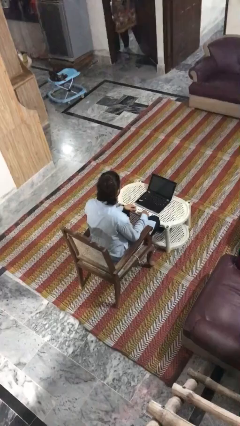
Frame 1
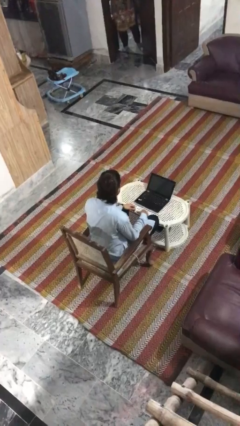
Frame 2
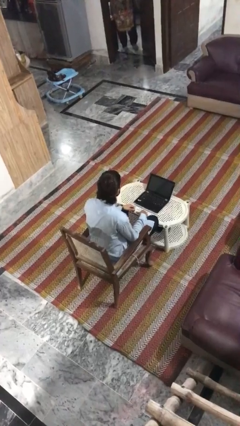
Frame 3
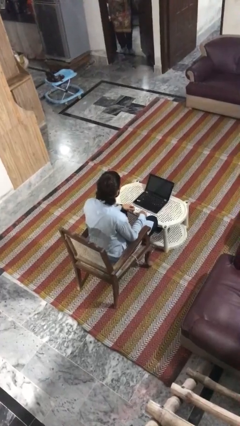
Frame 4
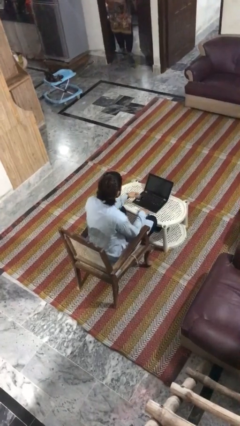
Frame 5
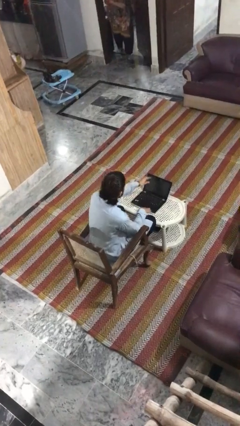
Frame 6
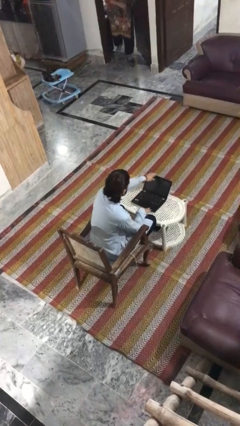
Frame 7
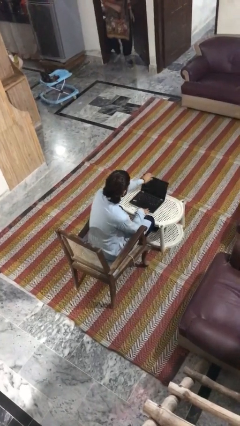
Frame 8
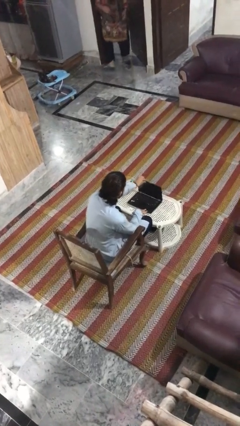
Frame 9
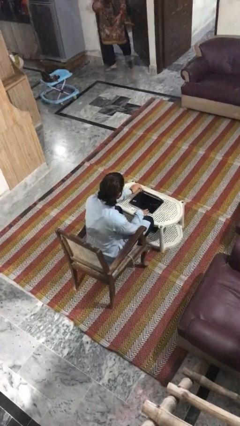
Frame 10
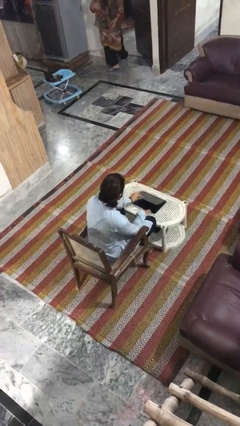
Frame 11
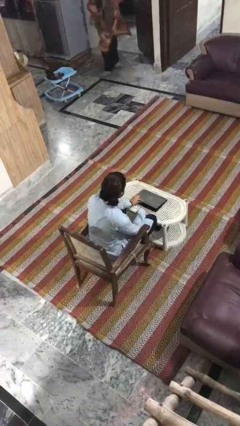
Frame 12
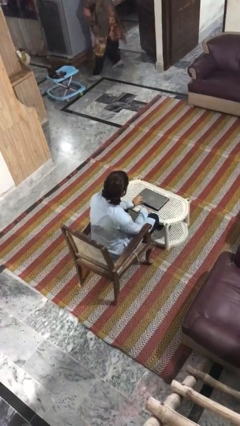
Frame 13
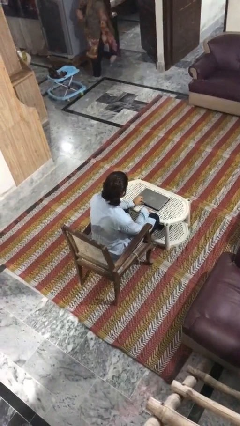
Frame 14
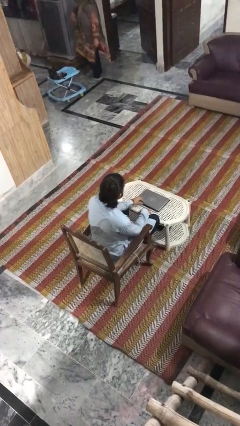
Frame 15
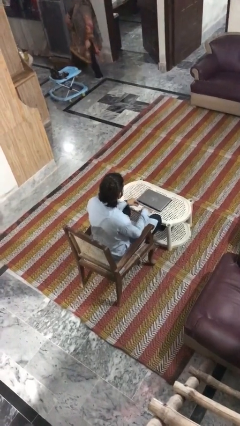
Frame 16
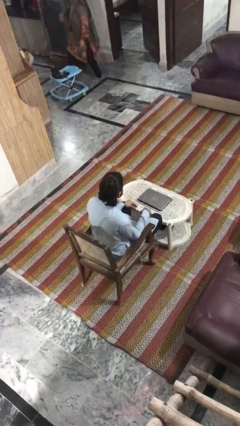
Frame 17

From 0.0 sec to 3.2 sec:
person closes laptop

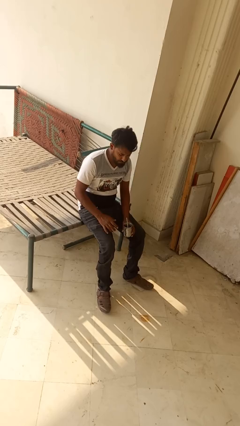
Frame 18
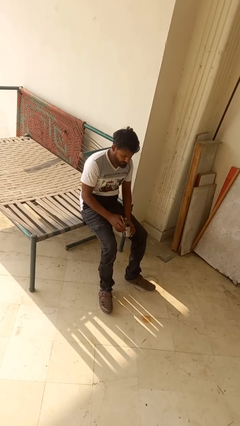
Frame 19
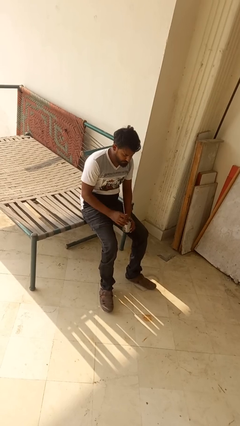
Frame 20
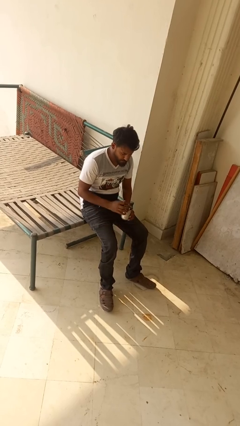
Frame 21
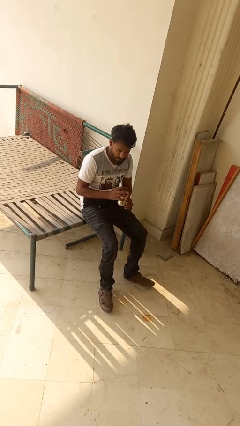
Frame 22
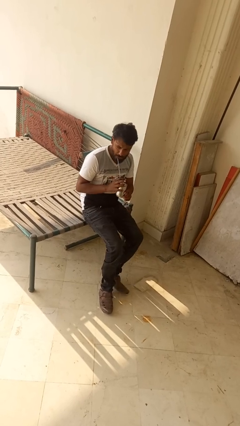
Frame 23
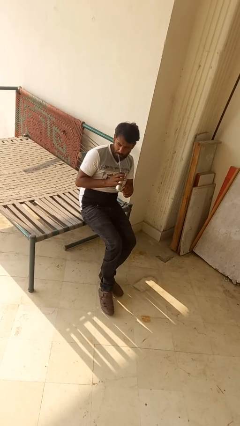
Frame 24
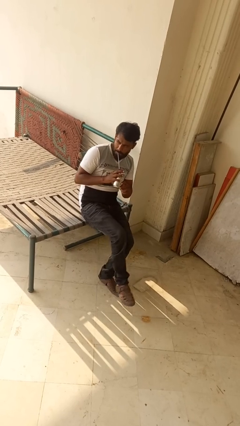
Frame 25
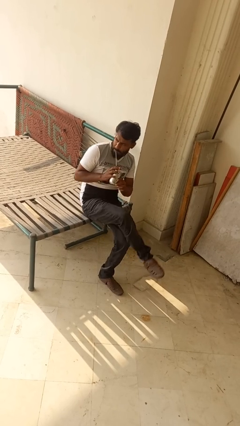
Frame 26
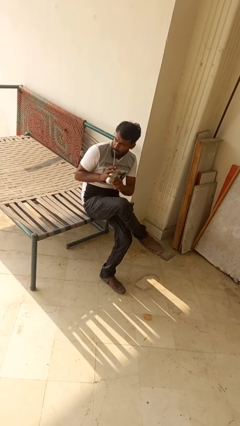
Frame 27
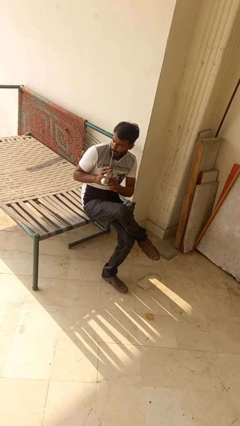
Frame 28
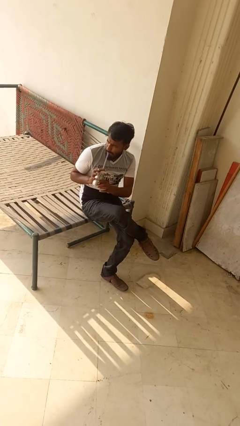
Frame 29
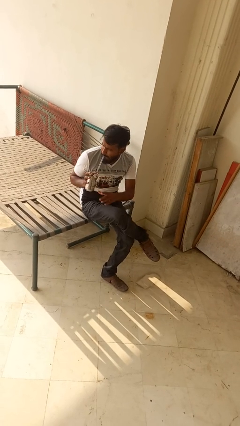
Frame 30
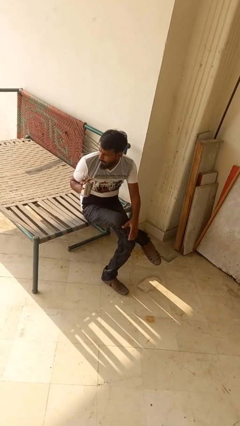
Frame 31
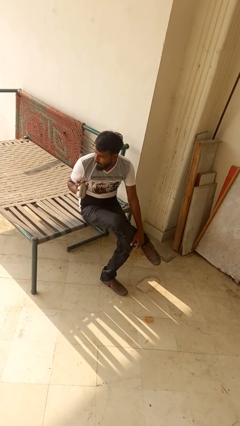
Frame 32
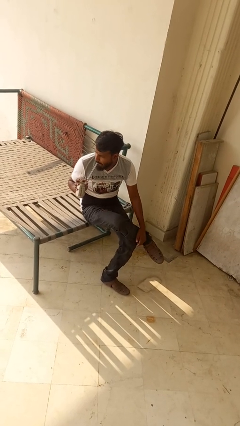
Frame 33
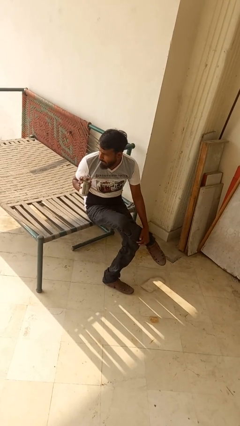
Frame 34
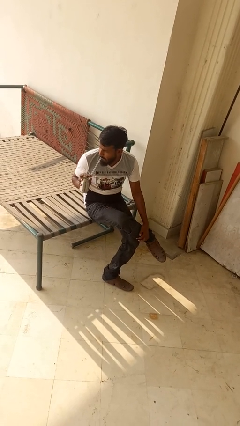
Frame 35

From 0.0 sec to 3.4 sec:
person drinks from straw

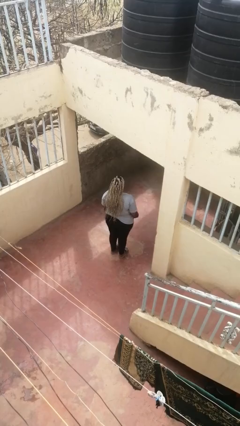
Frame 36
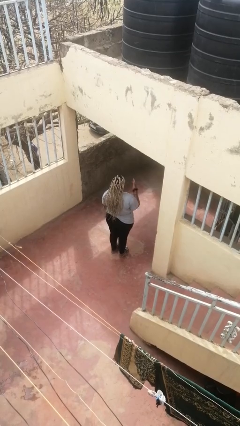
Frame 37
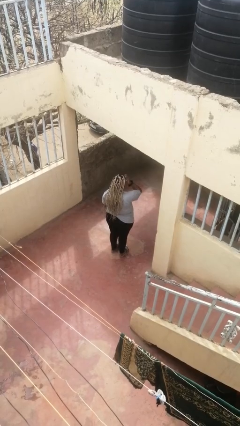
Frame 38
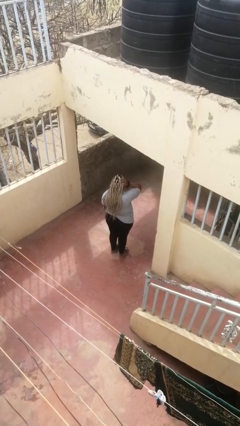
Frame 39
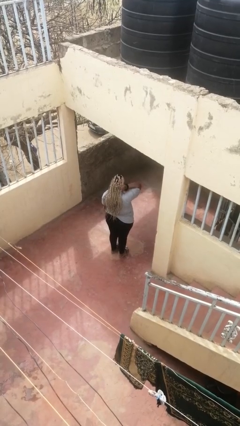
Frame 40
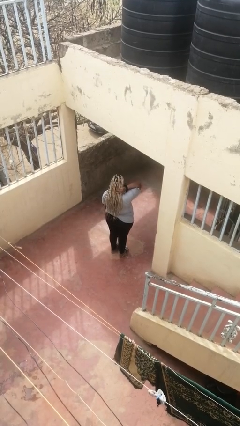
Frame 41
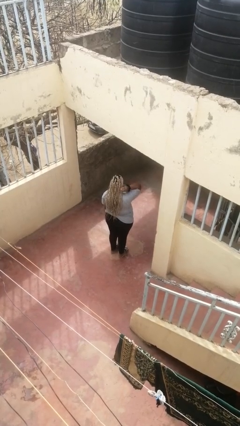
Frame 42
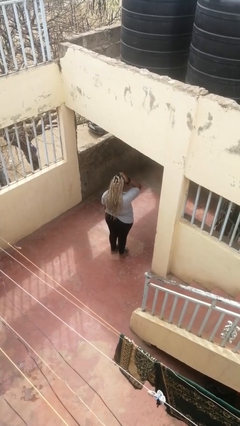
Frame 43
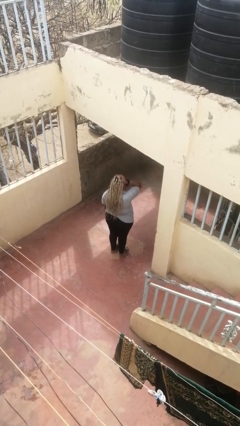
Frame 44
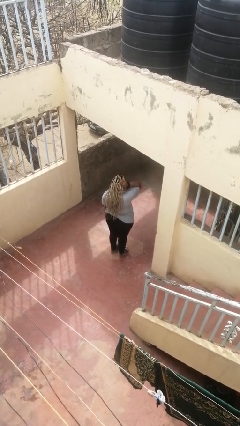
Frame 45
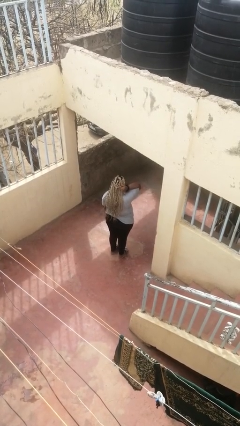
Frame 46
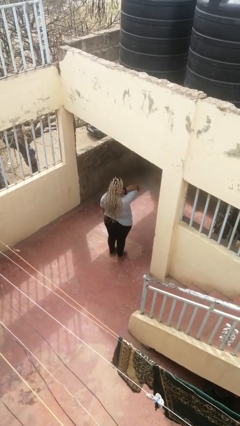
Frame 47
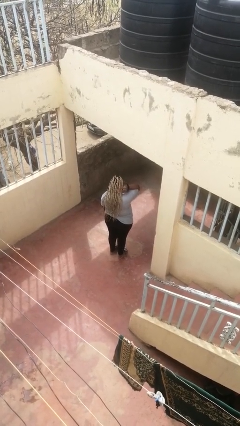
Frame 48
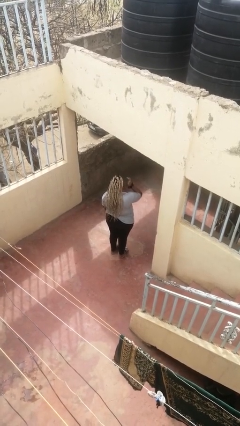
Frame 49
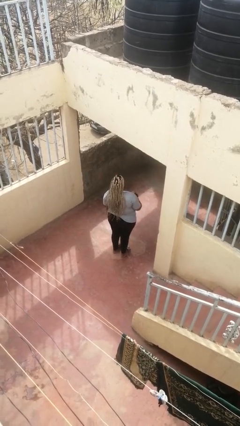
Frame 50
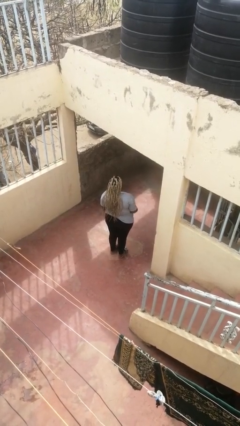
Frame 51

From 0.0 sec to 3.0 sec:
person strokes hair

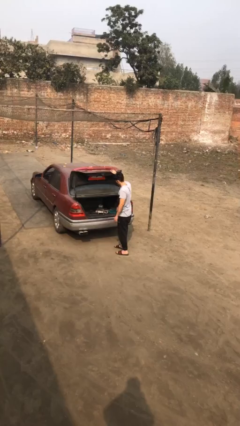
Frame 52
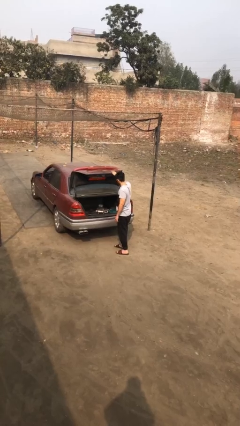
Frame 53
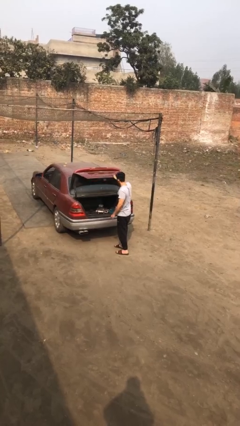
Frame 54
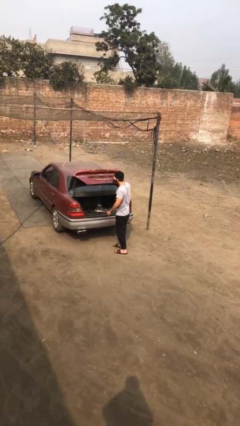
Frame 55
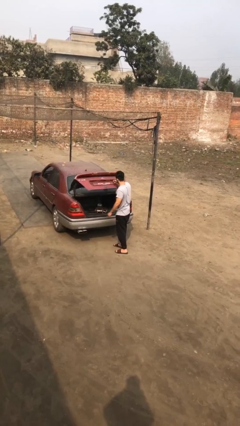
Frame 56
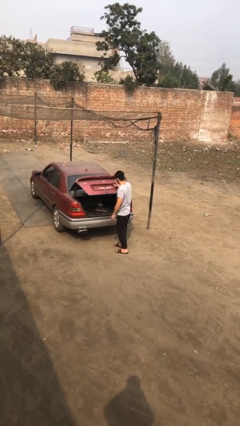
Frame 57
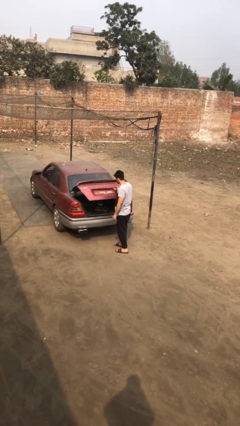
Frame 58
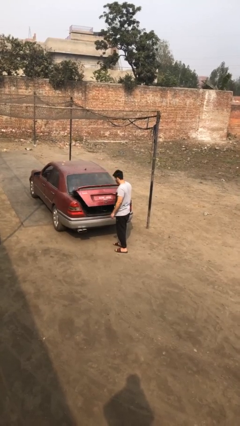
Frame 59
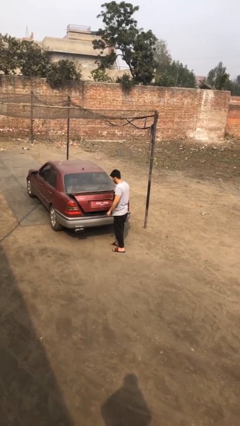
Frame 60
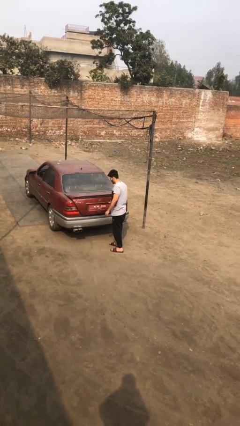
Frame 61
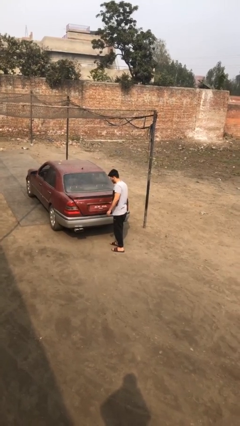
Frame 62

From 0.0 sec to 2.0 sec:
person closes car trunk

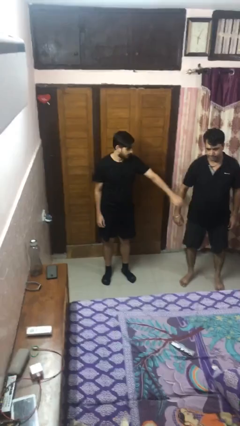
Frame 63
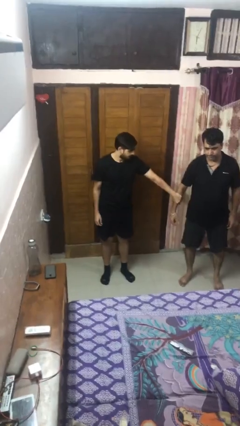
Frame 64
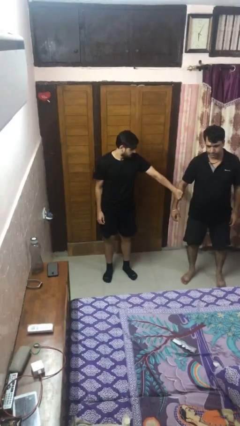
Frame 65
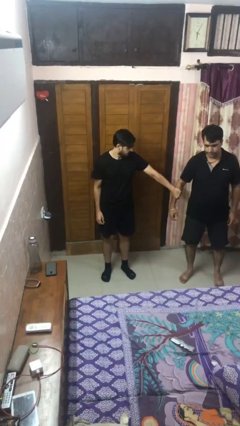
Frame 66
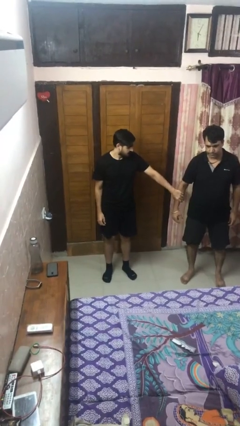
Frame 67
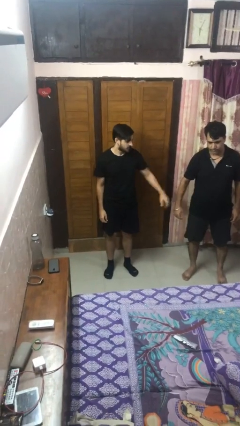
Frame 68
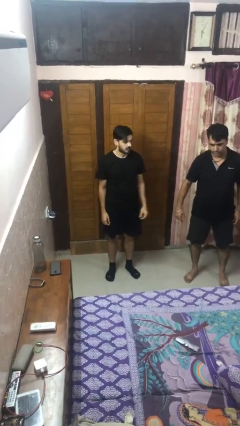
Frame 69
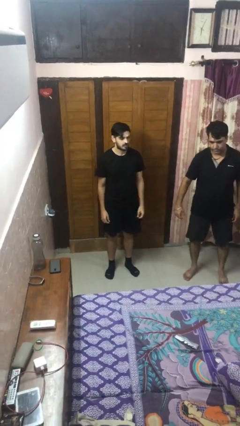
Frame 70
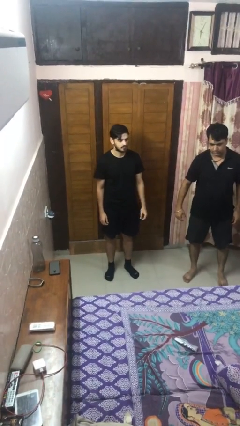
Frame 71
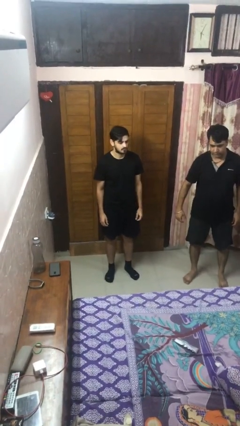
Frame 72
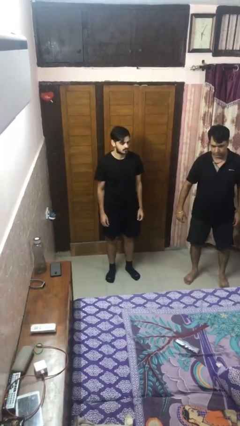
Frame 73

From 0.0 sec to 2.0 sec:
person grabs person by forearm

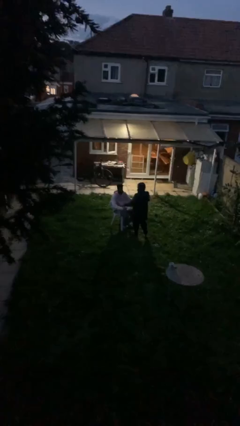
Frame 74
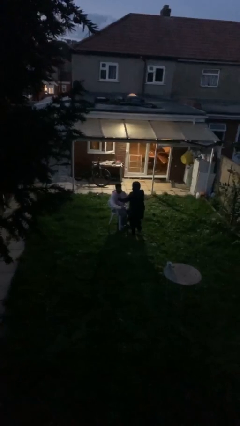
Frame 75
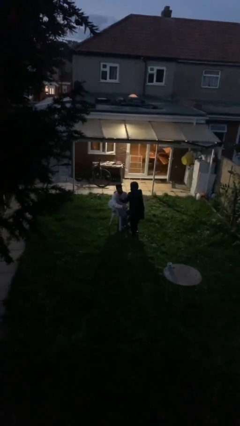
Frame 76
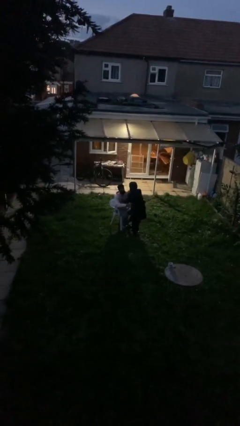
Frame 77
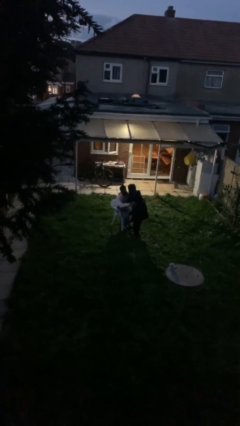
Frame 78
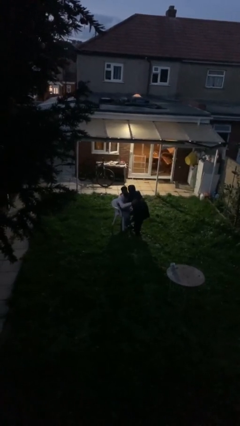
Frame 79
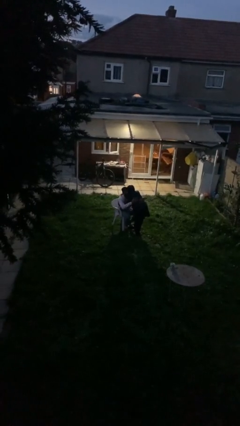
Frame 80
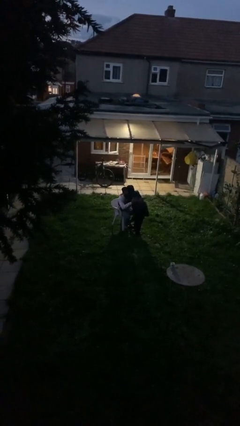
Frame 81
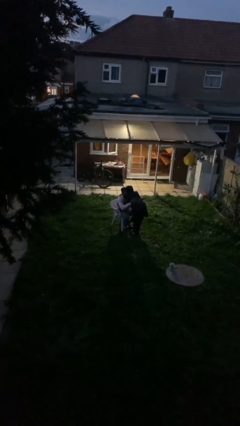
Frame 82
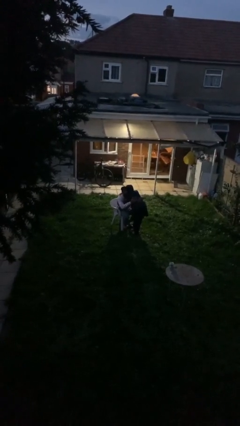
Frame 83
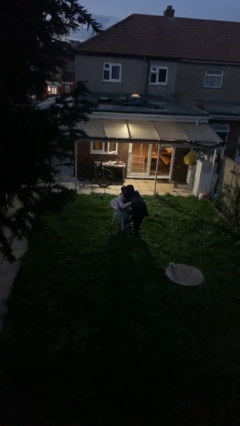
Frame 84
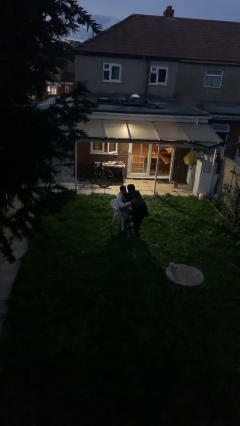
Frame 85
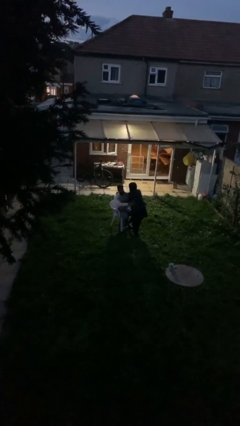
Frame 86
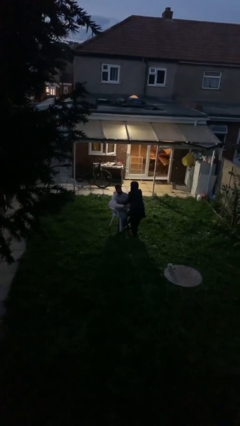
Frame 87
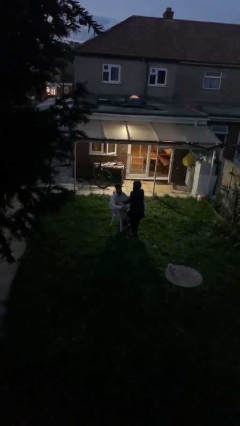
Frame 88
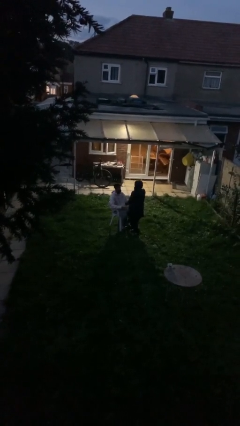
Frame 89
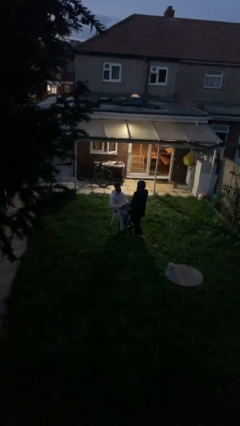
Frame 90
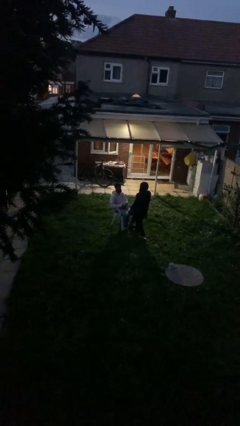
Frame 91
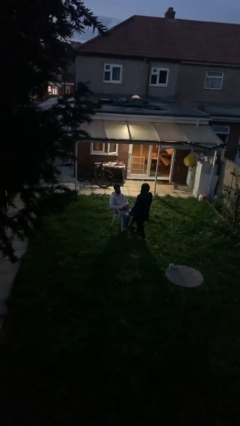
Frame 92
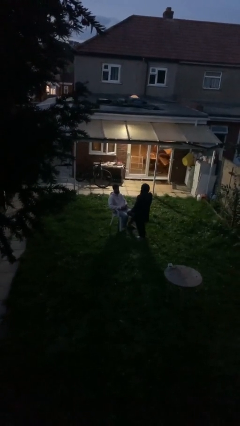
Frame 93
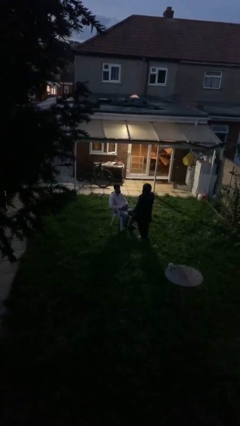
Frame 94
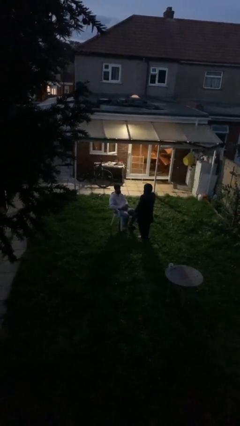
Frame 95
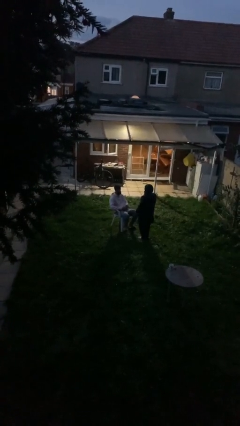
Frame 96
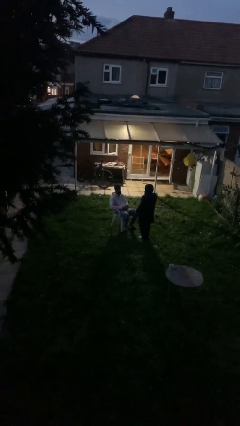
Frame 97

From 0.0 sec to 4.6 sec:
person embraces person
